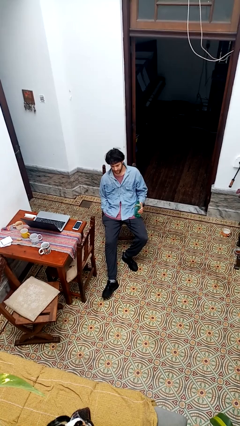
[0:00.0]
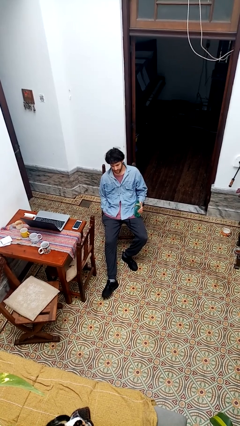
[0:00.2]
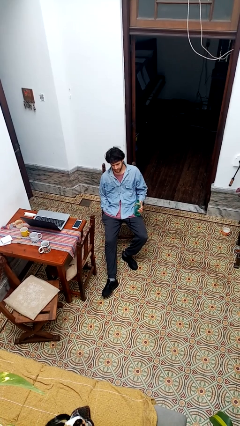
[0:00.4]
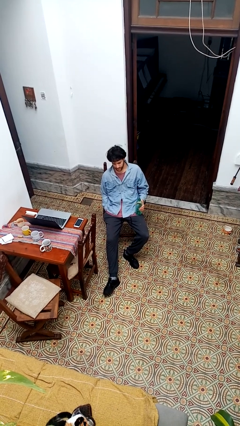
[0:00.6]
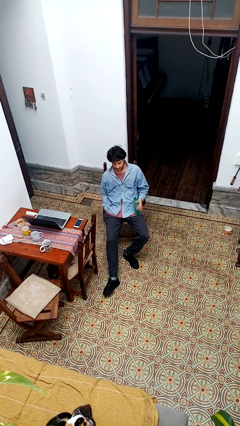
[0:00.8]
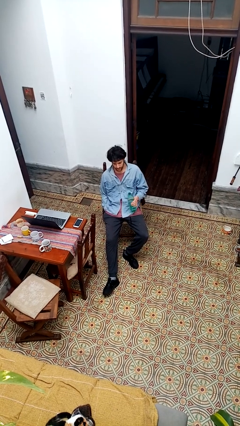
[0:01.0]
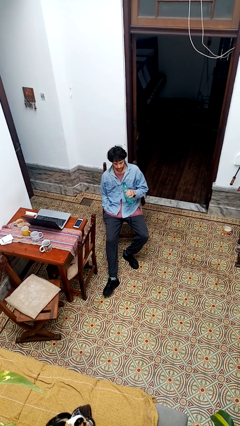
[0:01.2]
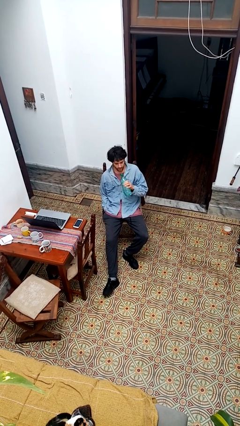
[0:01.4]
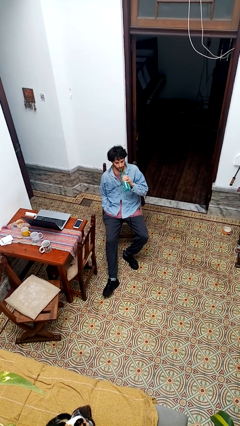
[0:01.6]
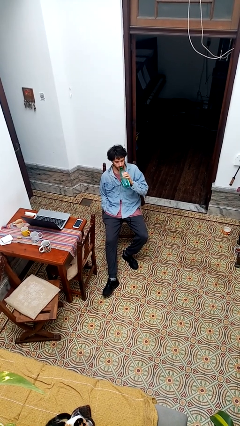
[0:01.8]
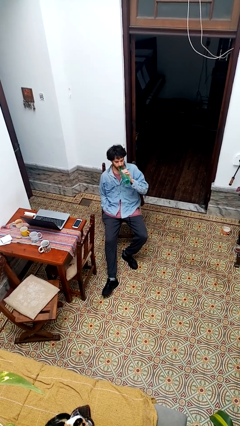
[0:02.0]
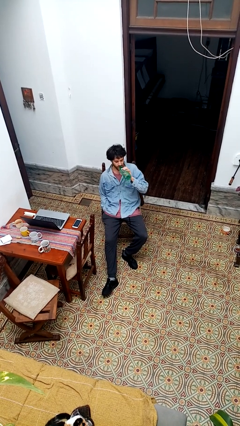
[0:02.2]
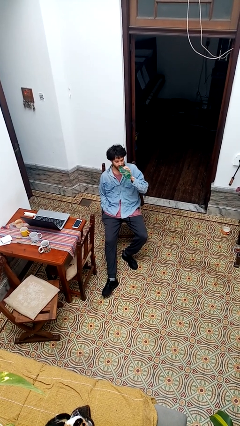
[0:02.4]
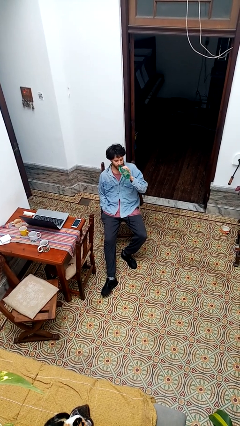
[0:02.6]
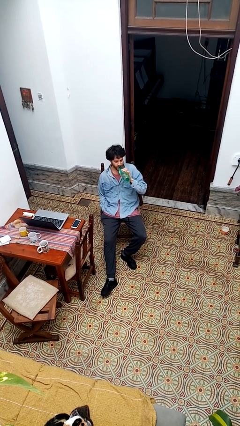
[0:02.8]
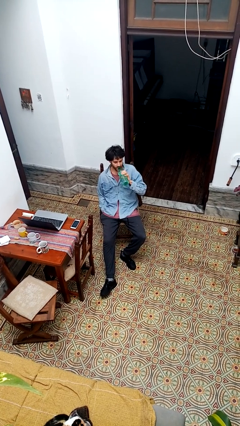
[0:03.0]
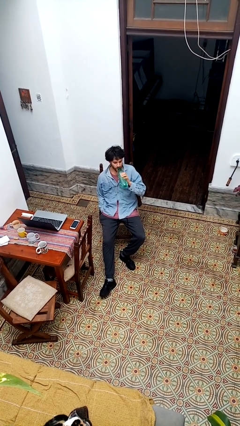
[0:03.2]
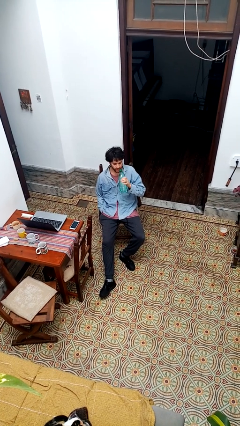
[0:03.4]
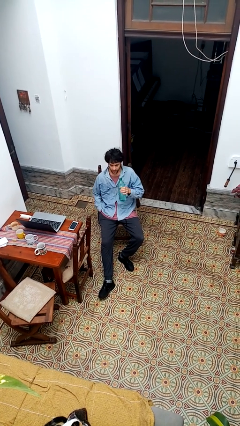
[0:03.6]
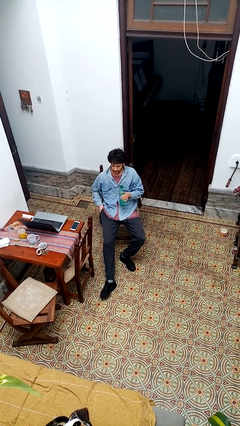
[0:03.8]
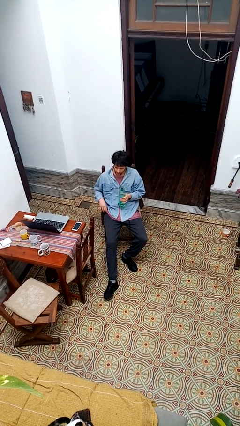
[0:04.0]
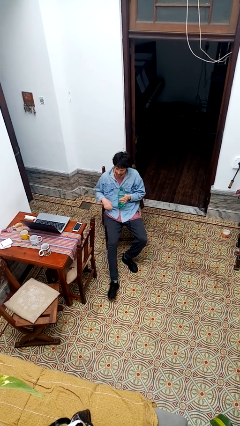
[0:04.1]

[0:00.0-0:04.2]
person drinks from bottle

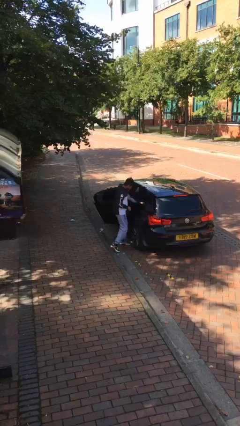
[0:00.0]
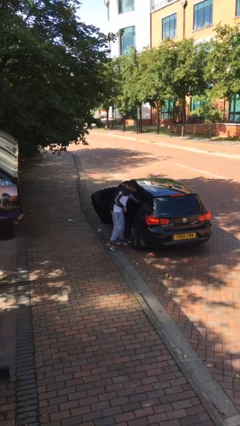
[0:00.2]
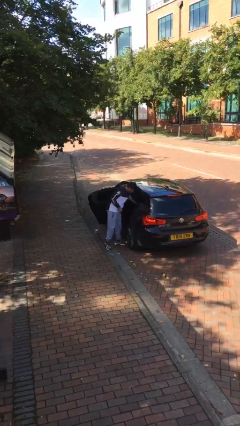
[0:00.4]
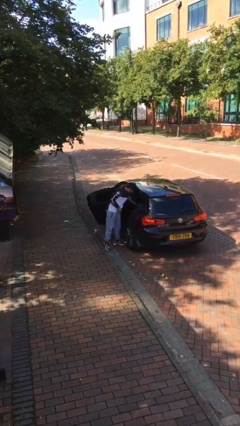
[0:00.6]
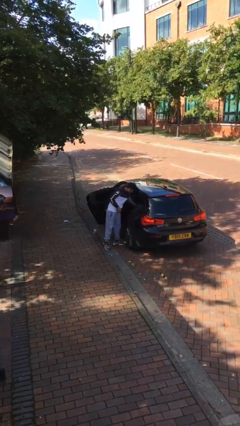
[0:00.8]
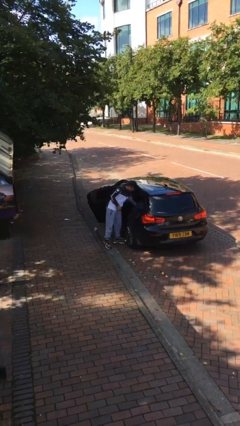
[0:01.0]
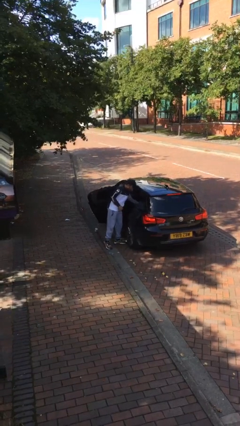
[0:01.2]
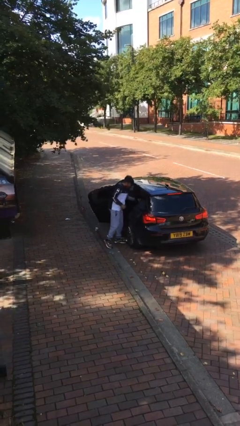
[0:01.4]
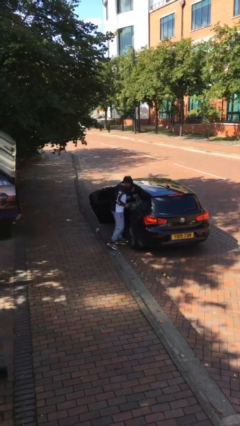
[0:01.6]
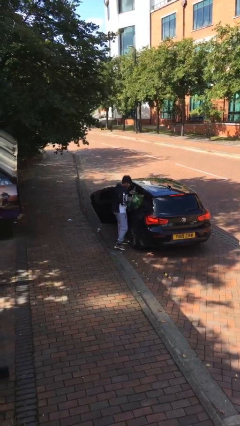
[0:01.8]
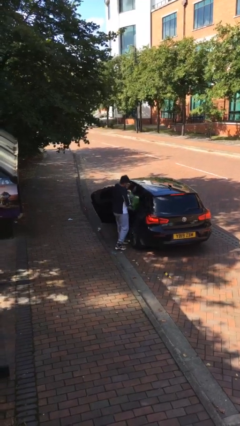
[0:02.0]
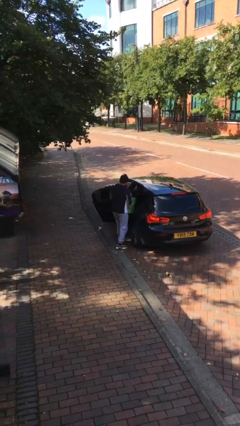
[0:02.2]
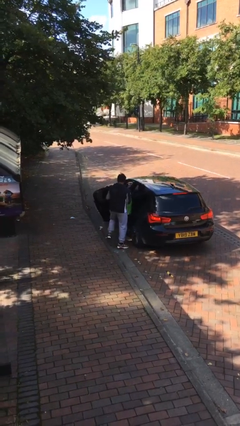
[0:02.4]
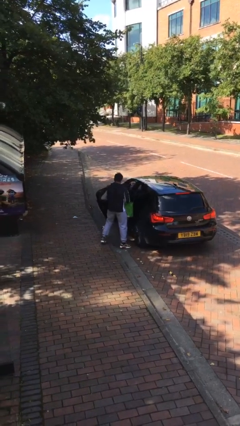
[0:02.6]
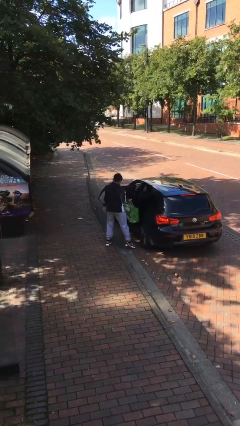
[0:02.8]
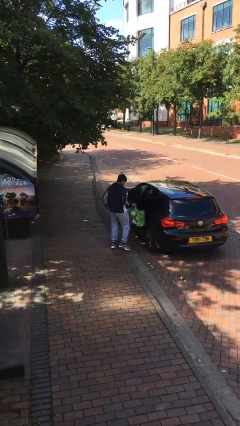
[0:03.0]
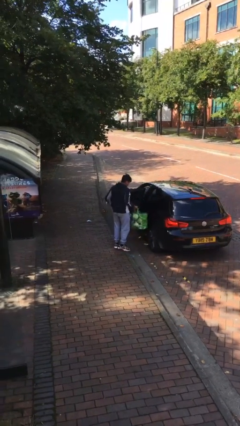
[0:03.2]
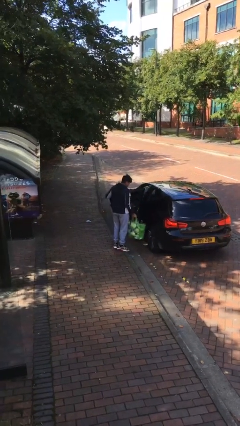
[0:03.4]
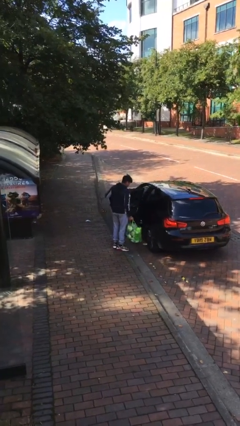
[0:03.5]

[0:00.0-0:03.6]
person unloads car

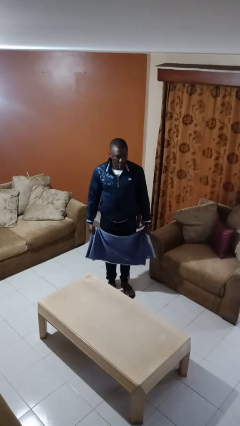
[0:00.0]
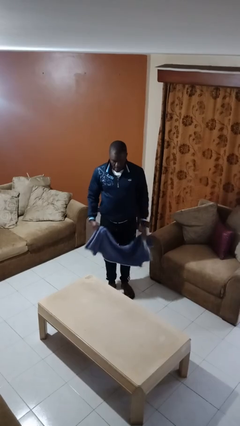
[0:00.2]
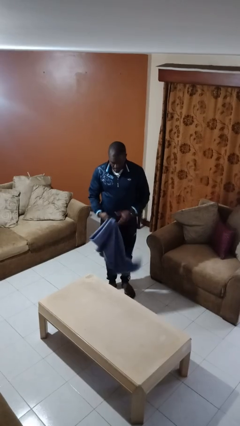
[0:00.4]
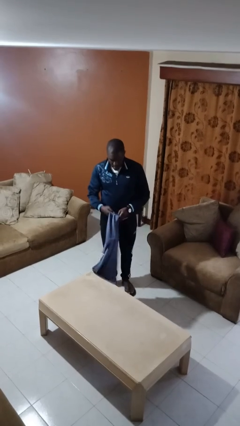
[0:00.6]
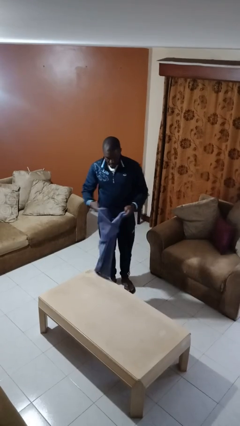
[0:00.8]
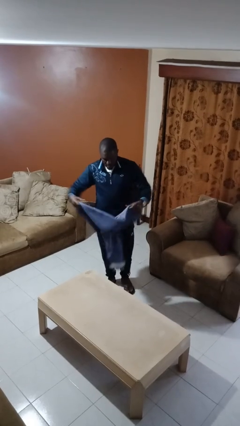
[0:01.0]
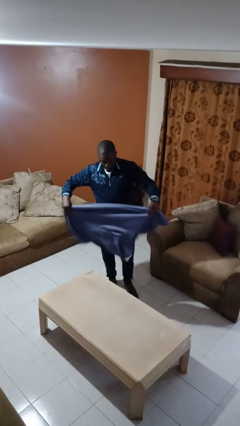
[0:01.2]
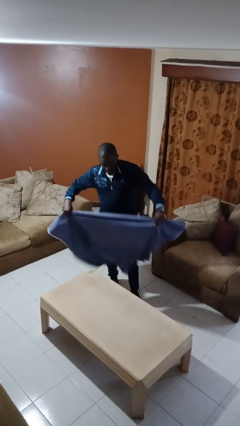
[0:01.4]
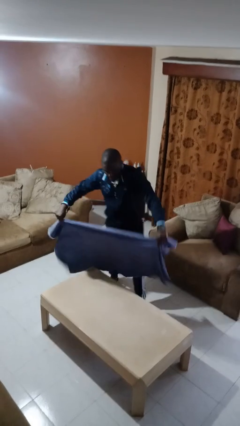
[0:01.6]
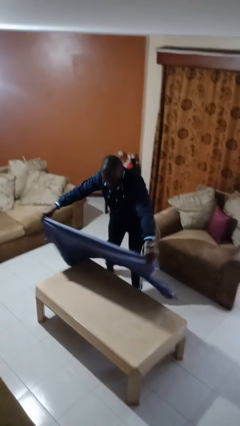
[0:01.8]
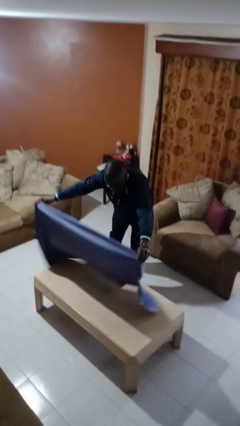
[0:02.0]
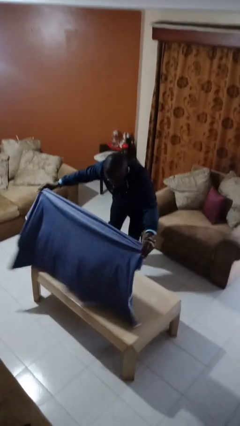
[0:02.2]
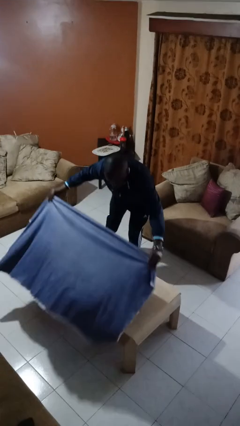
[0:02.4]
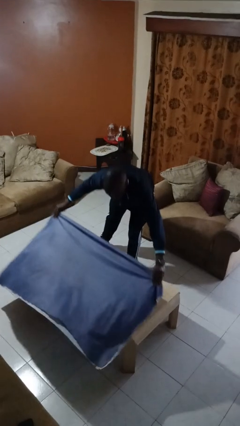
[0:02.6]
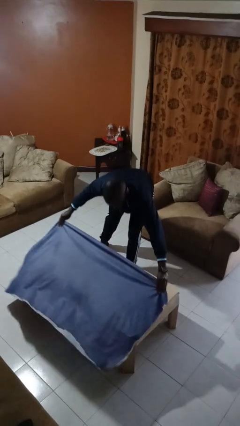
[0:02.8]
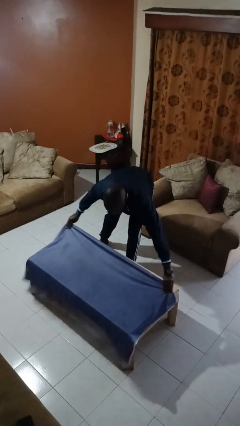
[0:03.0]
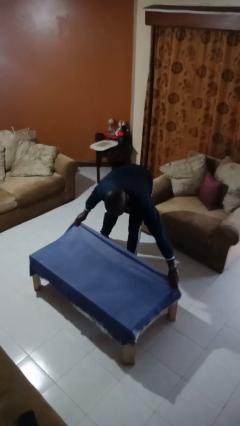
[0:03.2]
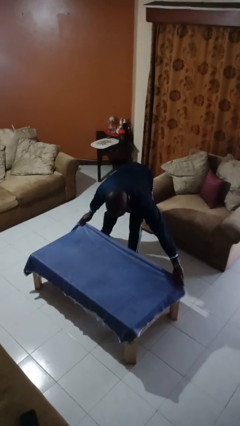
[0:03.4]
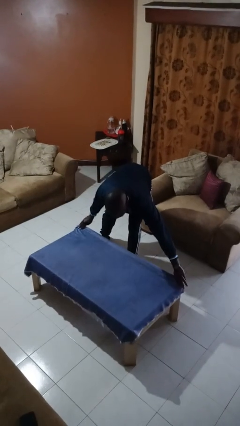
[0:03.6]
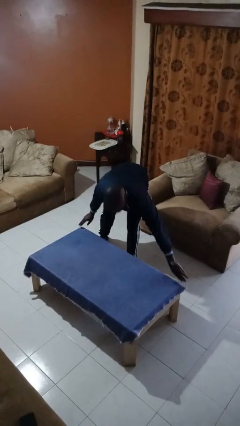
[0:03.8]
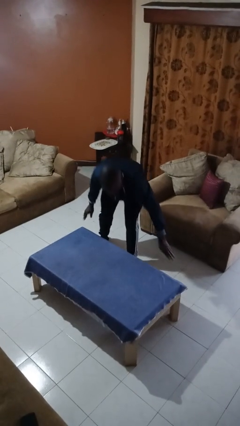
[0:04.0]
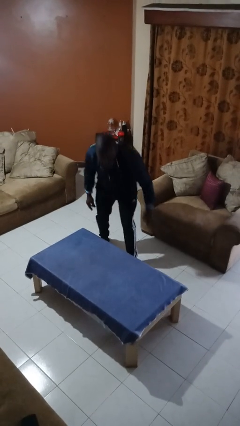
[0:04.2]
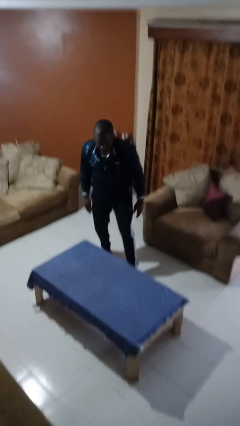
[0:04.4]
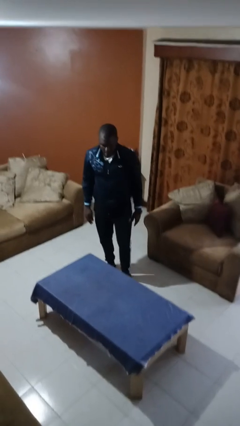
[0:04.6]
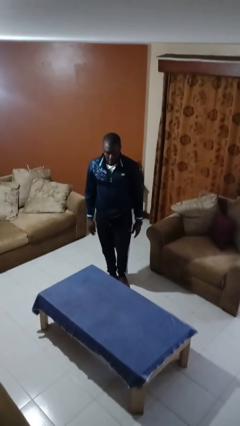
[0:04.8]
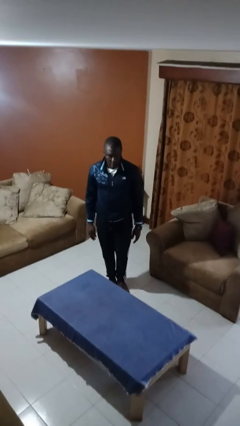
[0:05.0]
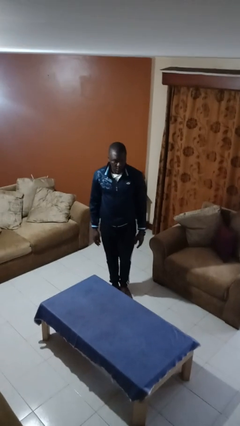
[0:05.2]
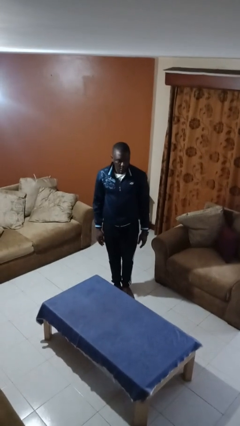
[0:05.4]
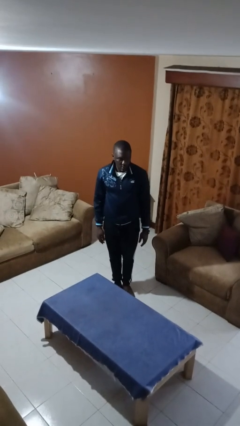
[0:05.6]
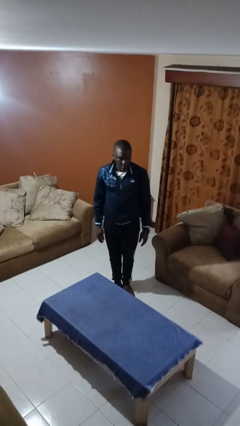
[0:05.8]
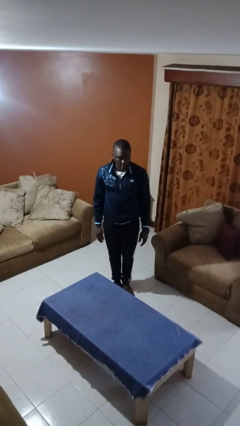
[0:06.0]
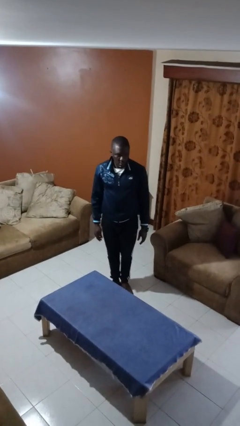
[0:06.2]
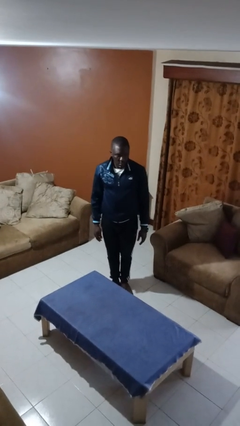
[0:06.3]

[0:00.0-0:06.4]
person spreads tablecloth

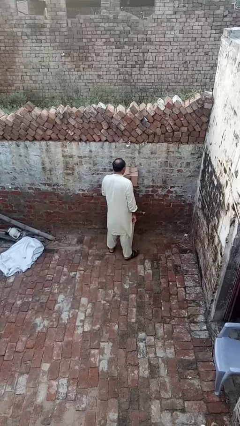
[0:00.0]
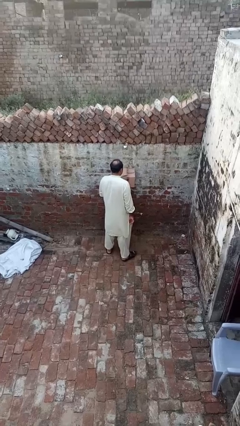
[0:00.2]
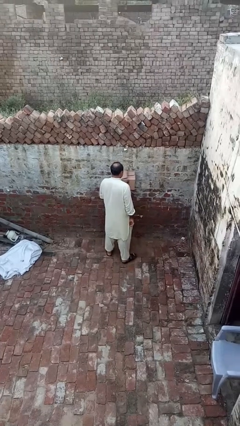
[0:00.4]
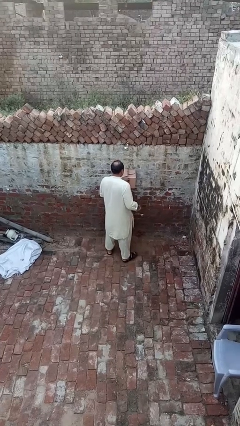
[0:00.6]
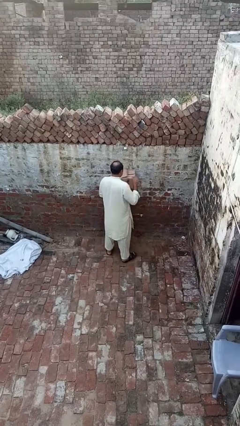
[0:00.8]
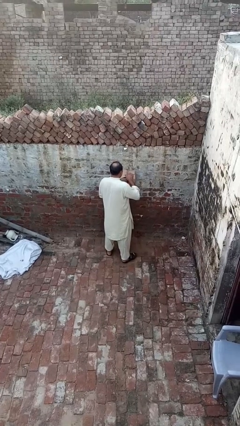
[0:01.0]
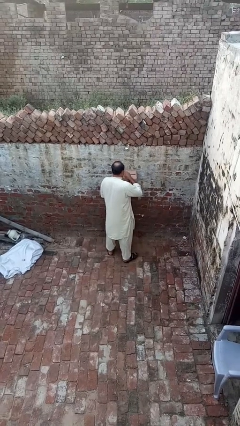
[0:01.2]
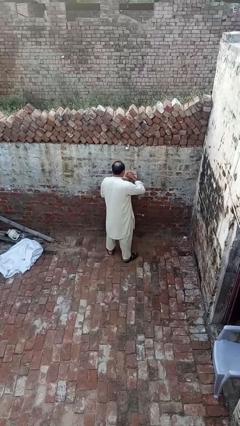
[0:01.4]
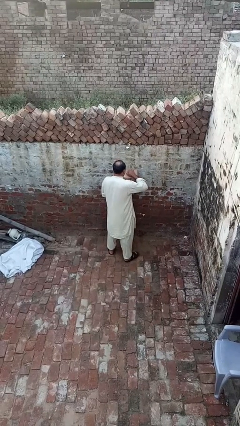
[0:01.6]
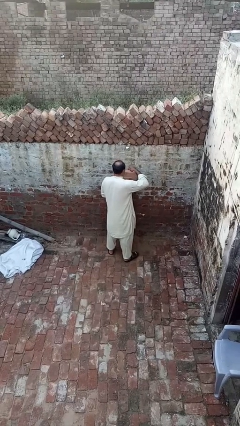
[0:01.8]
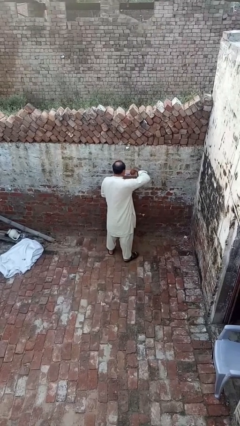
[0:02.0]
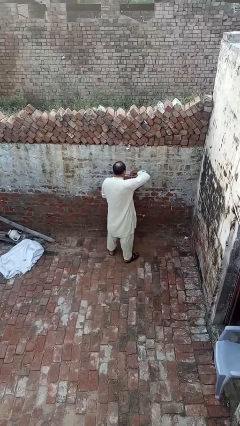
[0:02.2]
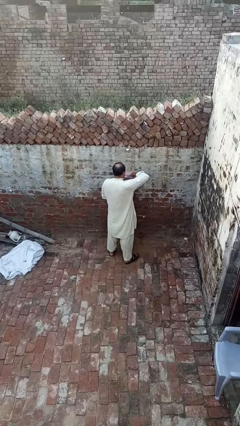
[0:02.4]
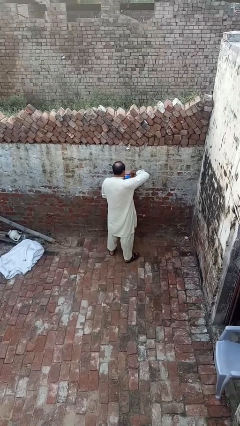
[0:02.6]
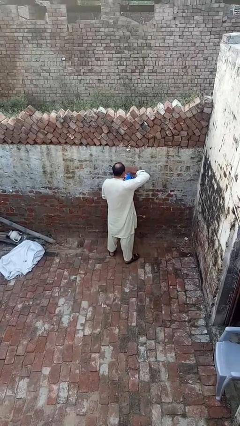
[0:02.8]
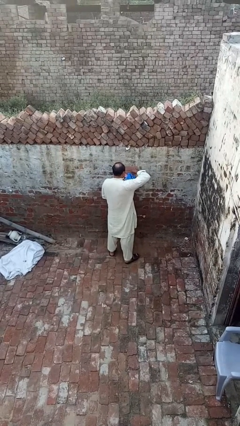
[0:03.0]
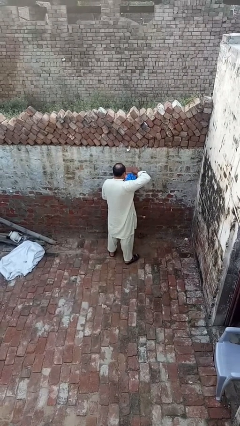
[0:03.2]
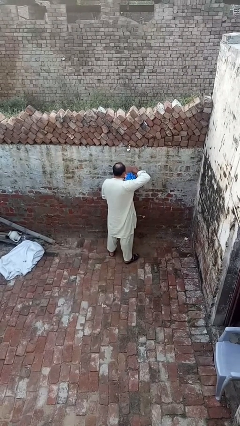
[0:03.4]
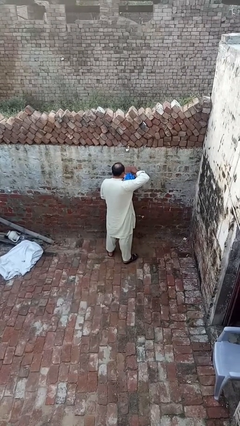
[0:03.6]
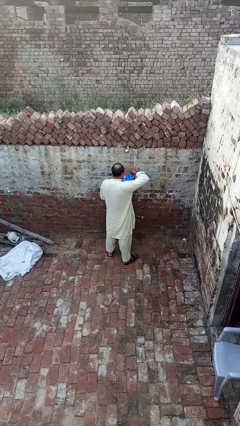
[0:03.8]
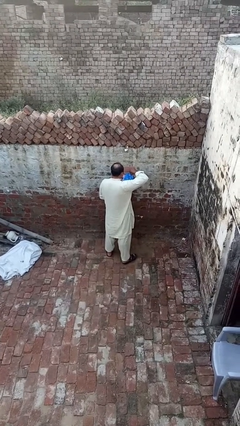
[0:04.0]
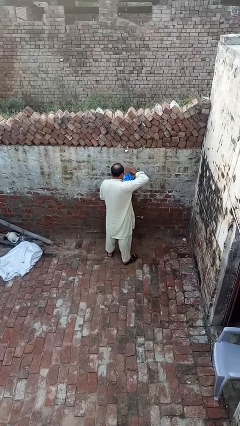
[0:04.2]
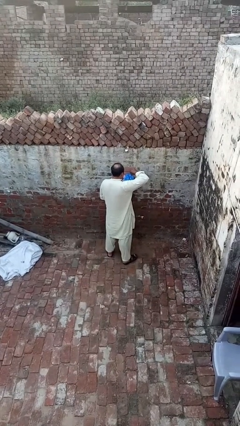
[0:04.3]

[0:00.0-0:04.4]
person opens mailbox
